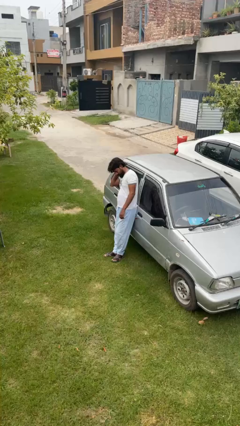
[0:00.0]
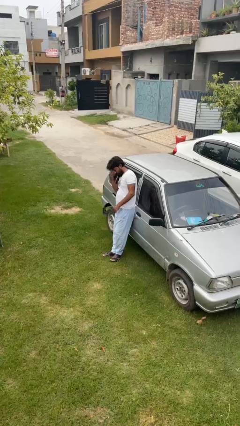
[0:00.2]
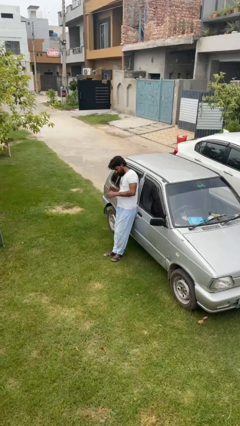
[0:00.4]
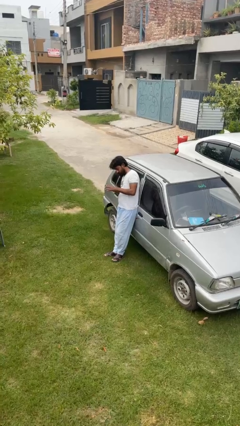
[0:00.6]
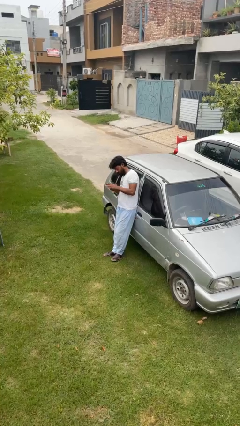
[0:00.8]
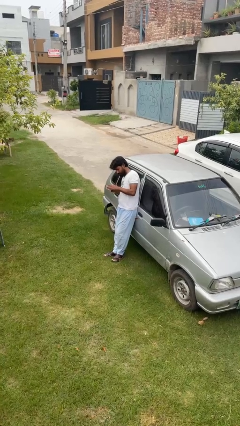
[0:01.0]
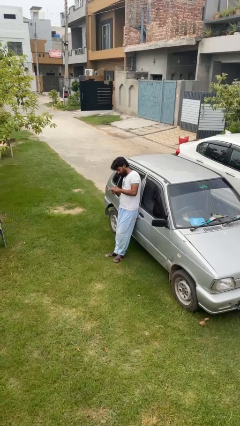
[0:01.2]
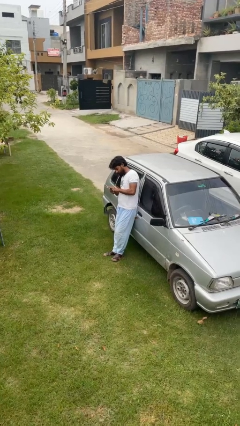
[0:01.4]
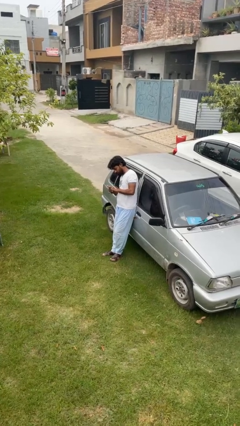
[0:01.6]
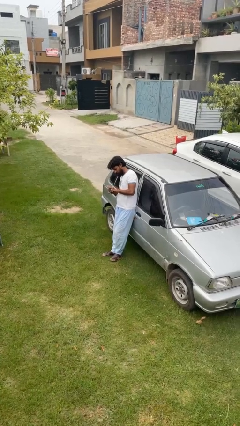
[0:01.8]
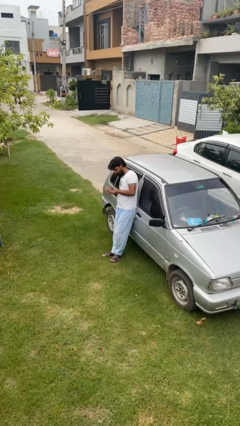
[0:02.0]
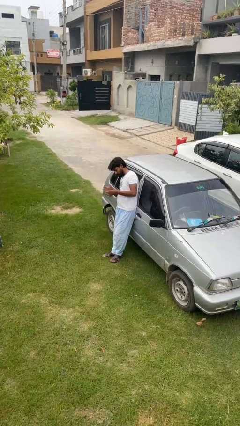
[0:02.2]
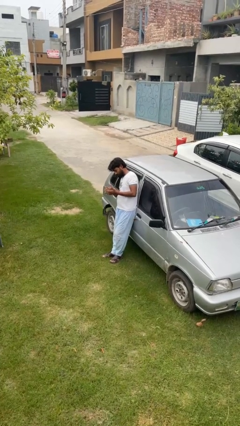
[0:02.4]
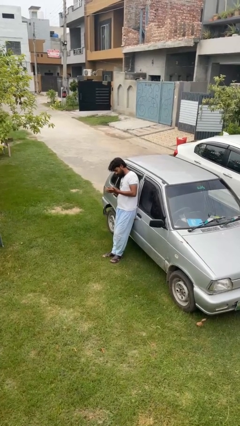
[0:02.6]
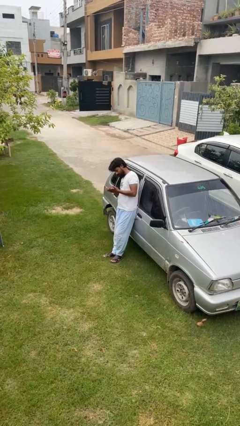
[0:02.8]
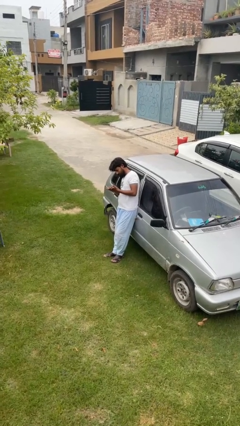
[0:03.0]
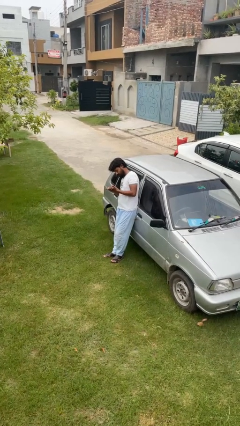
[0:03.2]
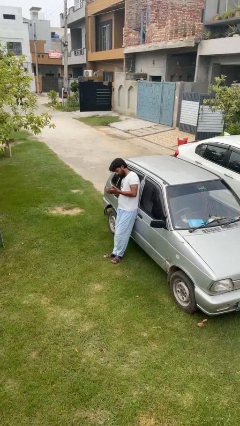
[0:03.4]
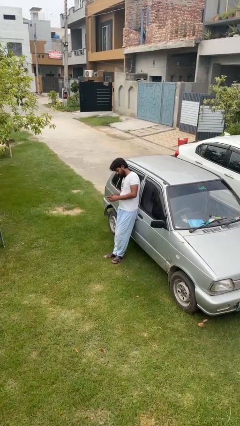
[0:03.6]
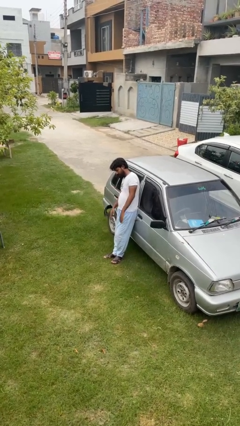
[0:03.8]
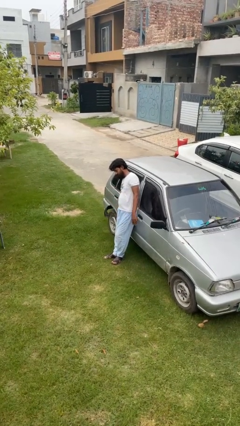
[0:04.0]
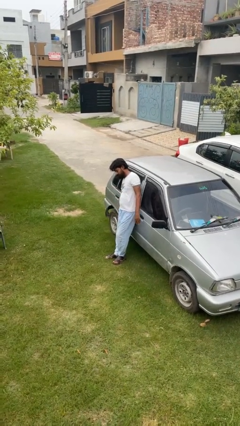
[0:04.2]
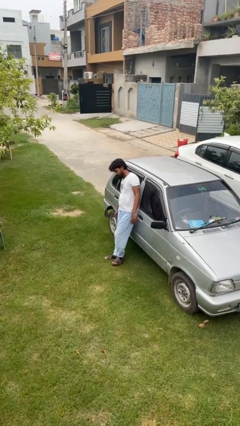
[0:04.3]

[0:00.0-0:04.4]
person cracks knuckles

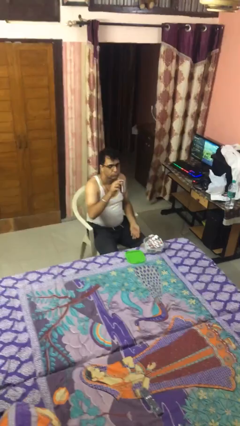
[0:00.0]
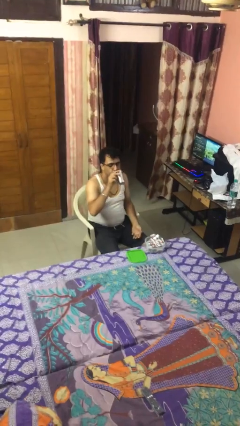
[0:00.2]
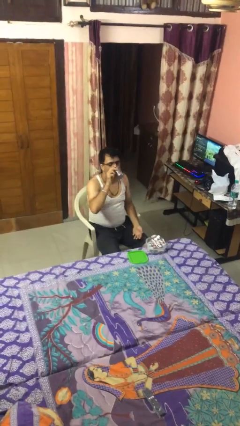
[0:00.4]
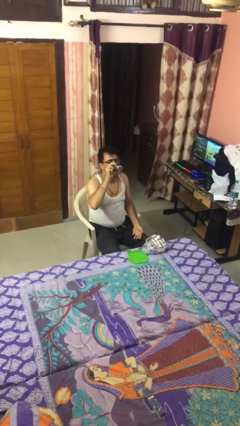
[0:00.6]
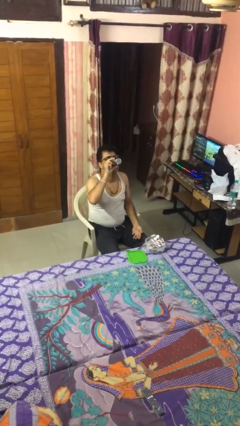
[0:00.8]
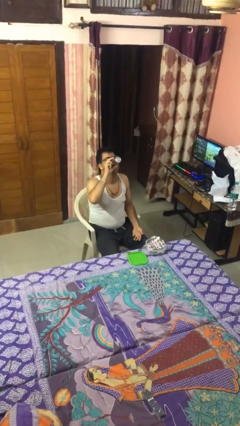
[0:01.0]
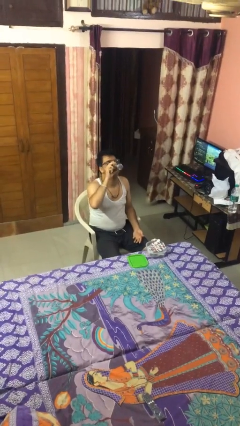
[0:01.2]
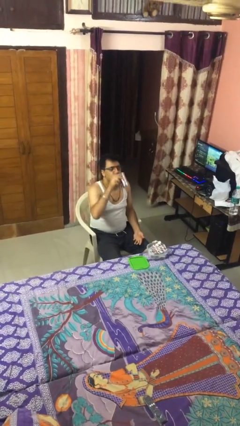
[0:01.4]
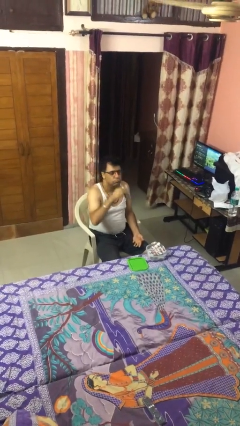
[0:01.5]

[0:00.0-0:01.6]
person drinks from cup

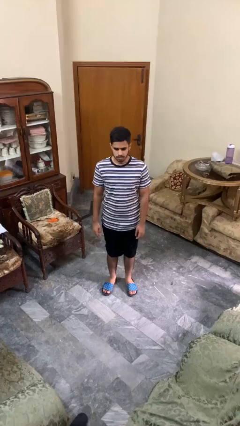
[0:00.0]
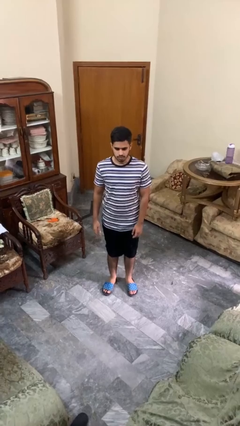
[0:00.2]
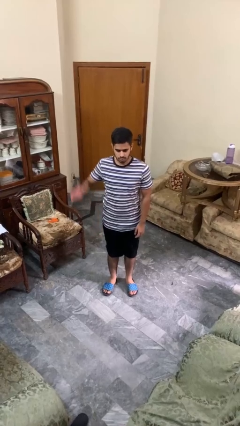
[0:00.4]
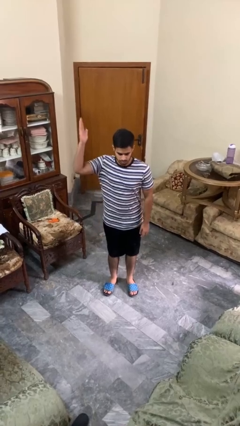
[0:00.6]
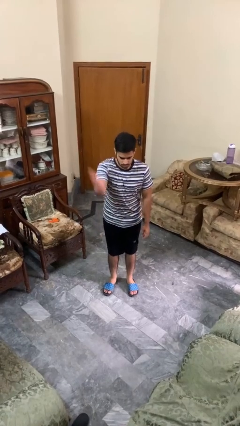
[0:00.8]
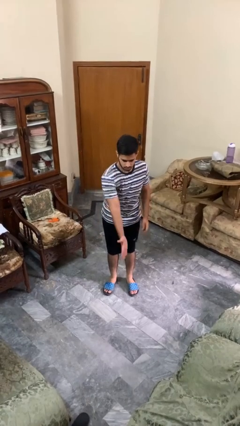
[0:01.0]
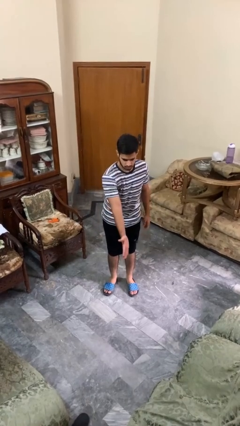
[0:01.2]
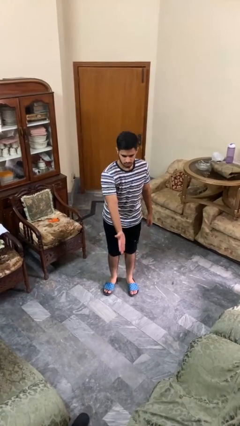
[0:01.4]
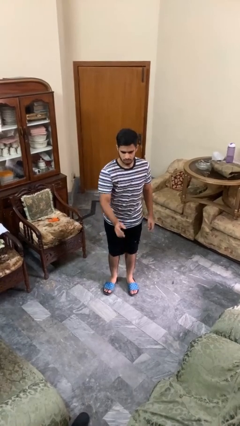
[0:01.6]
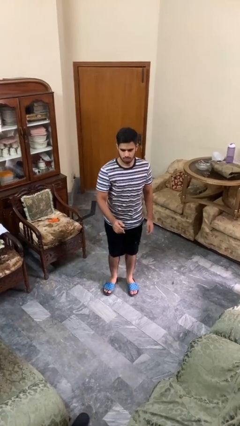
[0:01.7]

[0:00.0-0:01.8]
person karate chop

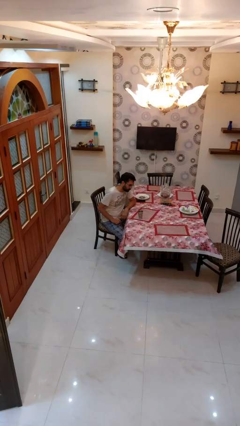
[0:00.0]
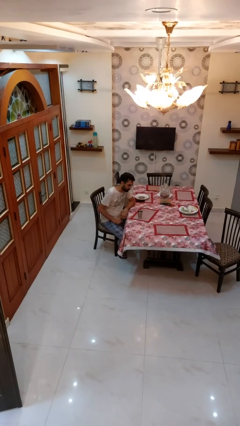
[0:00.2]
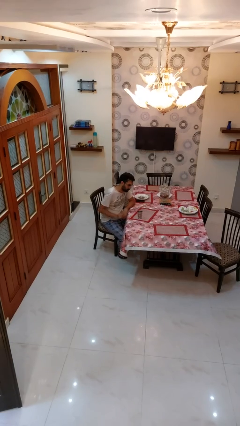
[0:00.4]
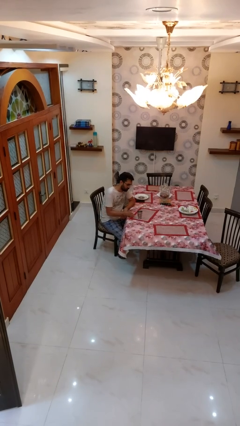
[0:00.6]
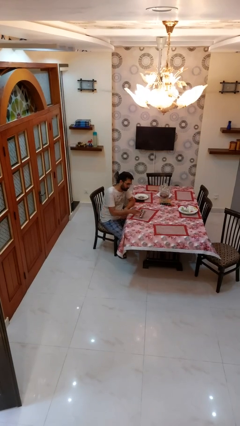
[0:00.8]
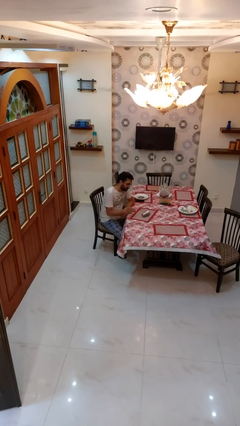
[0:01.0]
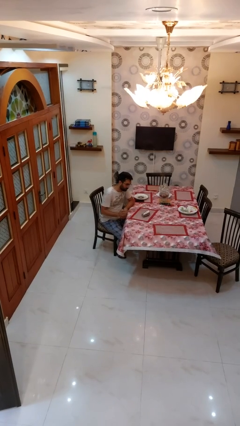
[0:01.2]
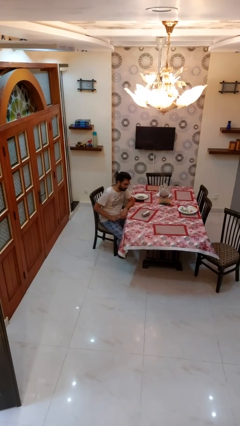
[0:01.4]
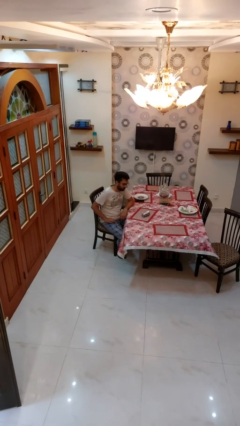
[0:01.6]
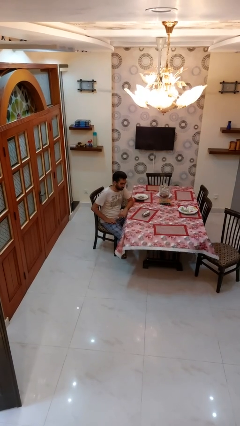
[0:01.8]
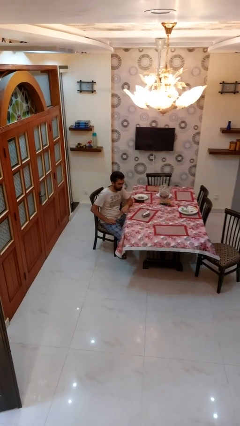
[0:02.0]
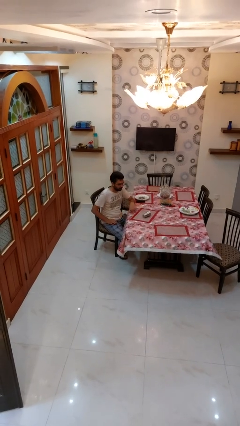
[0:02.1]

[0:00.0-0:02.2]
person knocks over glass

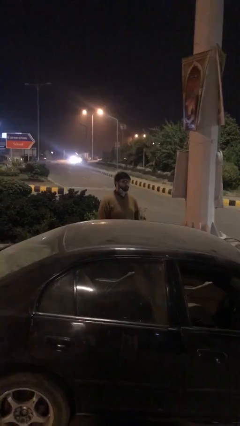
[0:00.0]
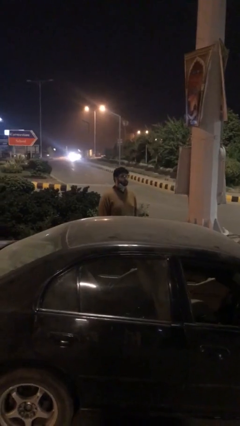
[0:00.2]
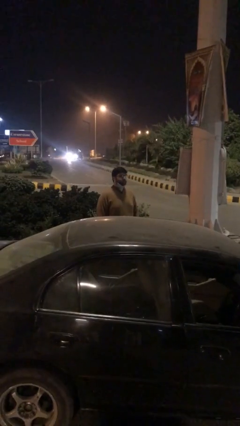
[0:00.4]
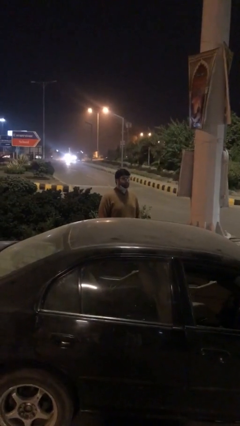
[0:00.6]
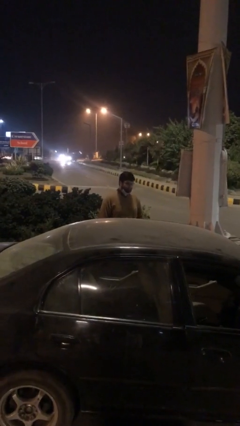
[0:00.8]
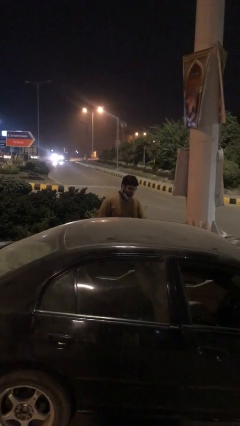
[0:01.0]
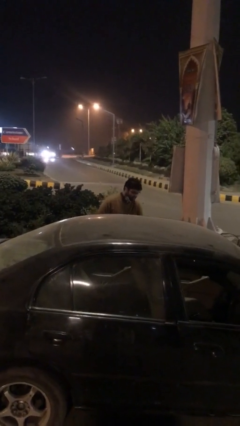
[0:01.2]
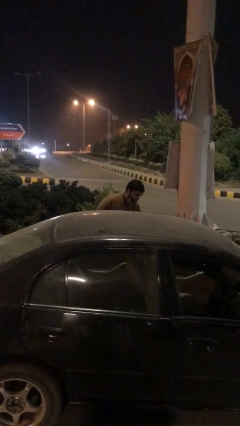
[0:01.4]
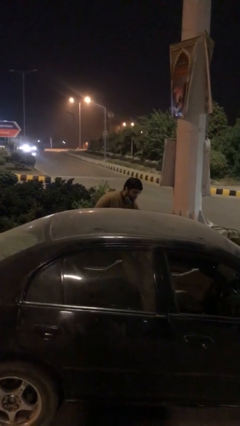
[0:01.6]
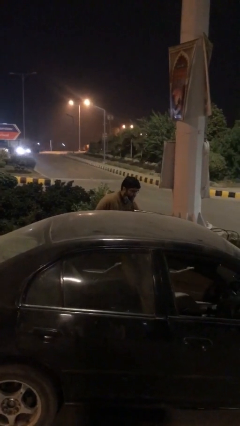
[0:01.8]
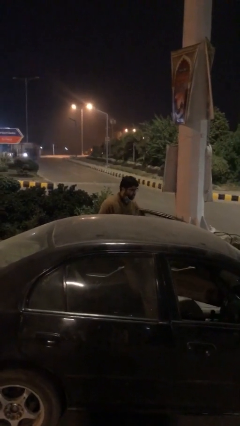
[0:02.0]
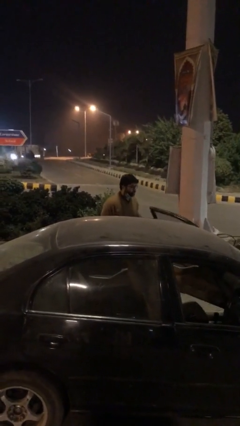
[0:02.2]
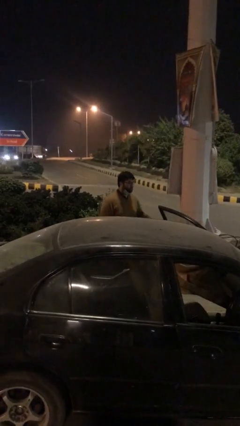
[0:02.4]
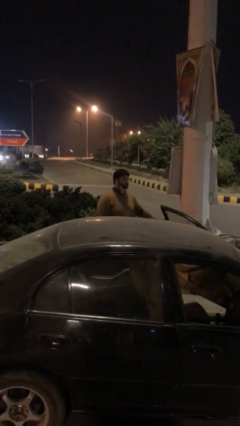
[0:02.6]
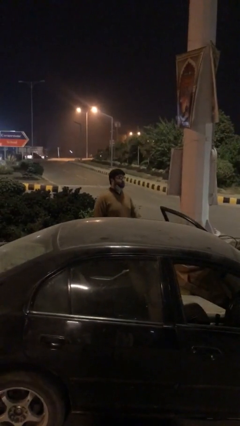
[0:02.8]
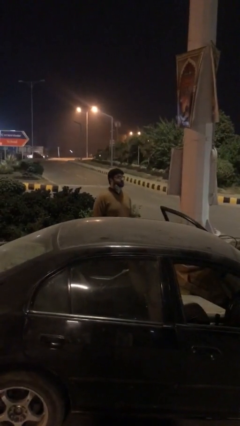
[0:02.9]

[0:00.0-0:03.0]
person opens car door

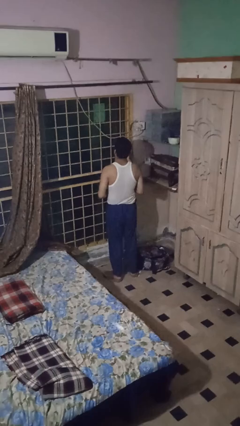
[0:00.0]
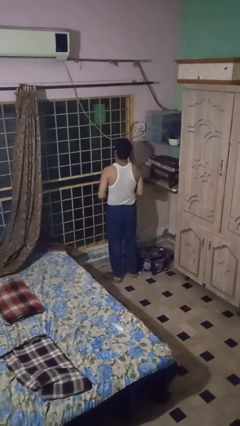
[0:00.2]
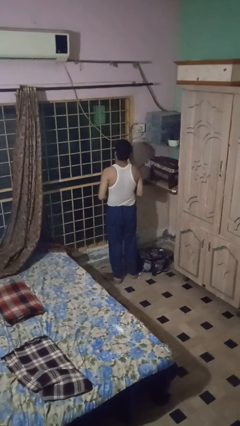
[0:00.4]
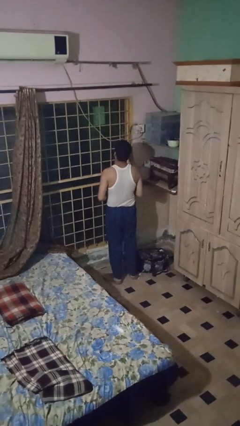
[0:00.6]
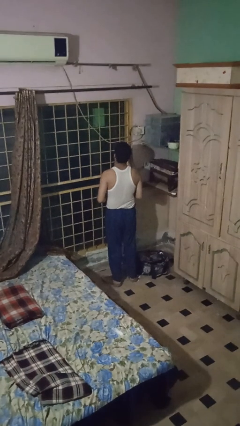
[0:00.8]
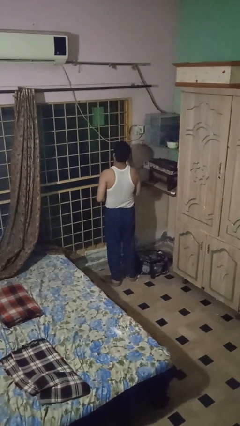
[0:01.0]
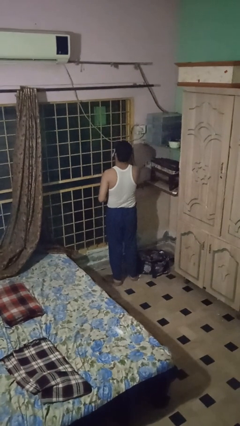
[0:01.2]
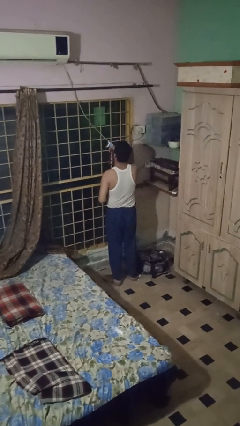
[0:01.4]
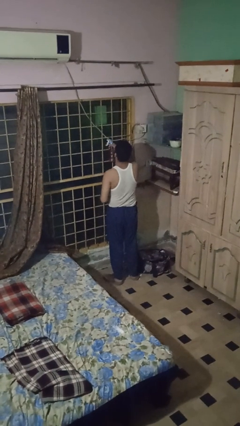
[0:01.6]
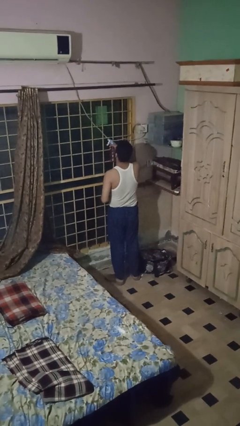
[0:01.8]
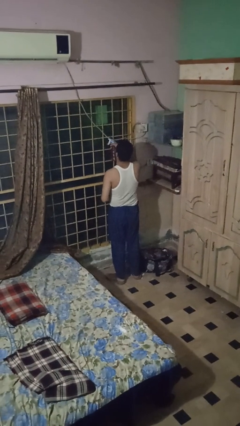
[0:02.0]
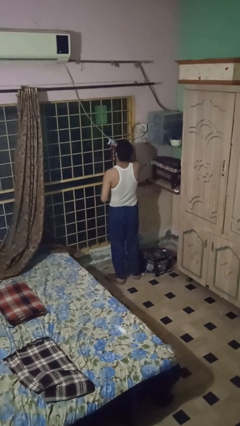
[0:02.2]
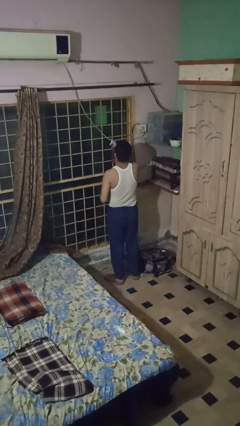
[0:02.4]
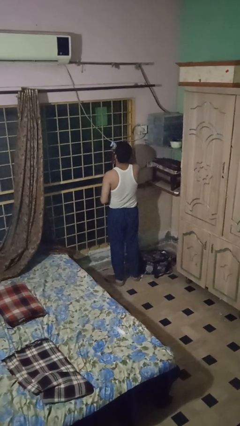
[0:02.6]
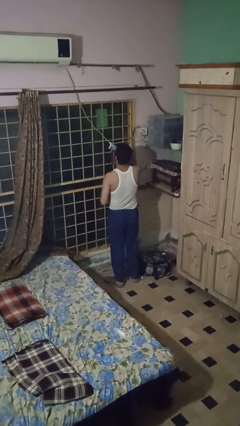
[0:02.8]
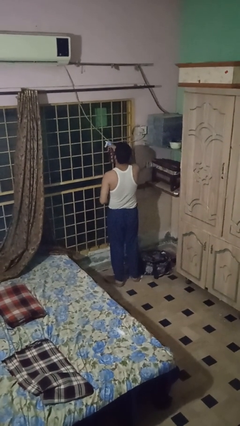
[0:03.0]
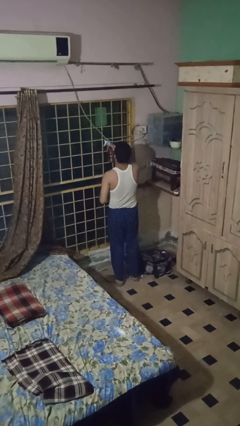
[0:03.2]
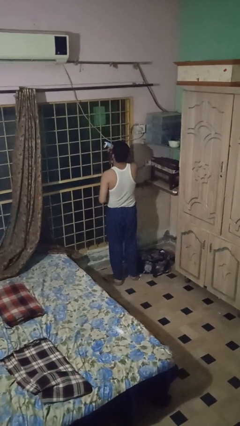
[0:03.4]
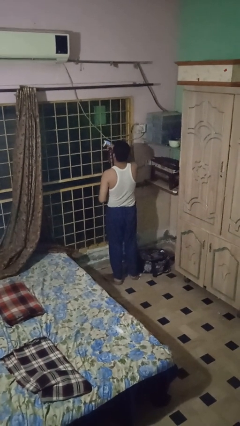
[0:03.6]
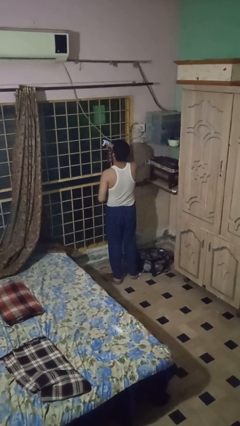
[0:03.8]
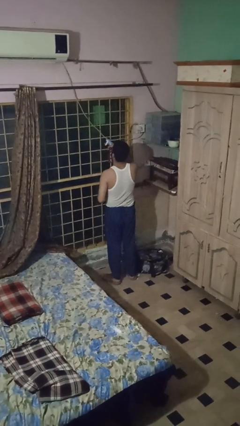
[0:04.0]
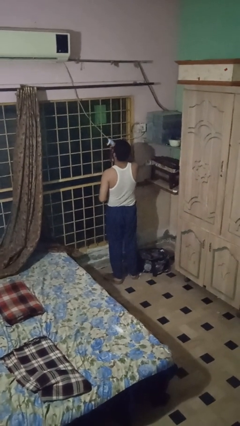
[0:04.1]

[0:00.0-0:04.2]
person sprays from bottle

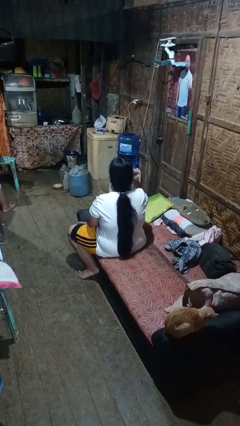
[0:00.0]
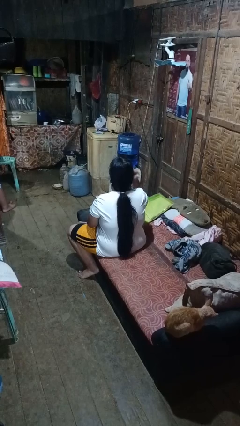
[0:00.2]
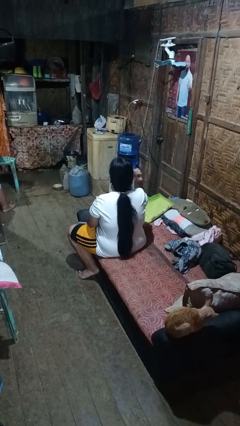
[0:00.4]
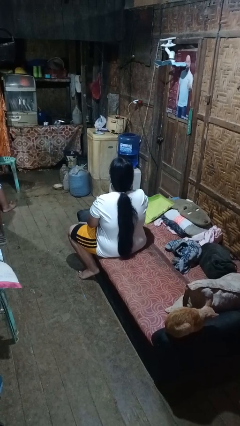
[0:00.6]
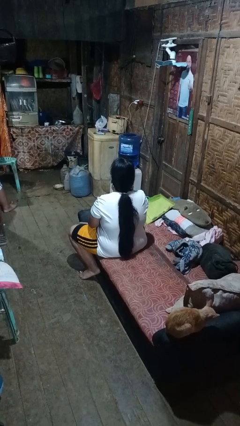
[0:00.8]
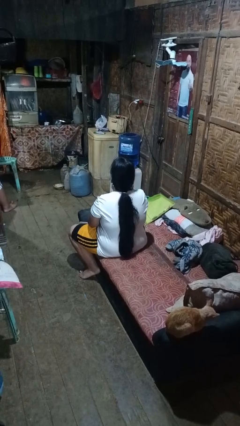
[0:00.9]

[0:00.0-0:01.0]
person gestures behind me
